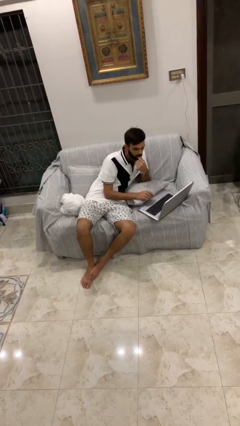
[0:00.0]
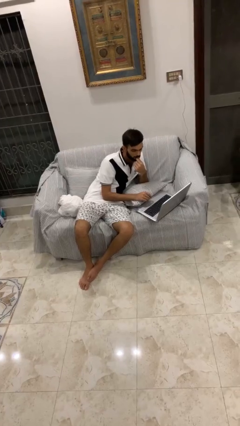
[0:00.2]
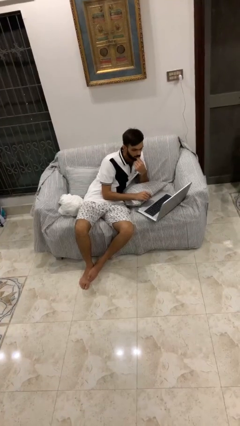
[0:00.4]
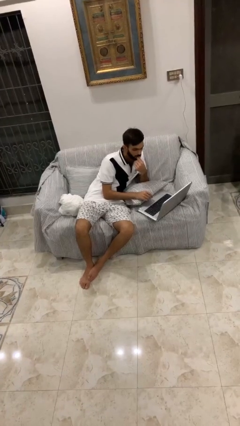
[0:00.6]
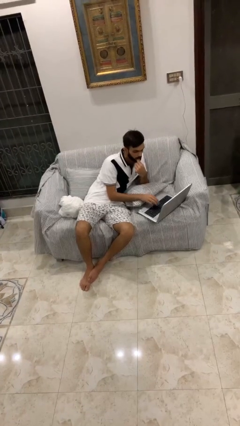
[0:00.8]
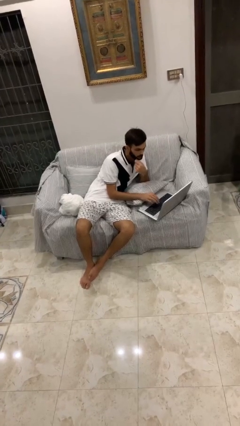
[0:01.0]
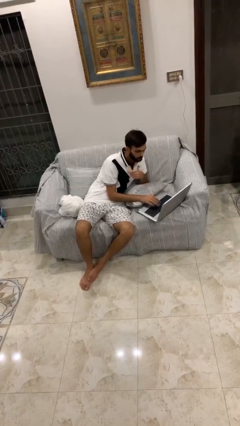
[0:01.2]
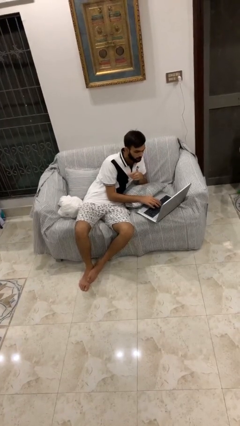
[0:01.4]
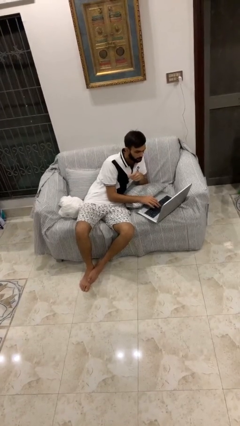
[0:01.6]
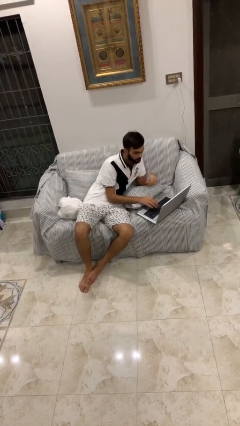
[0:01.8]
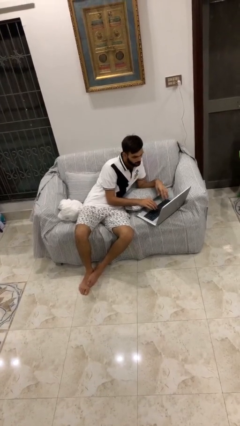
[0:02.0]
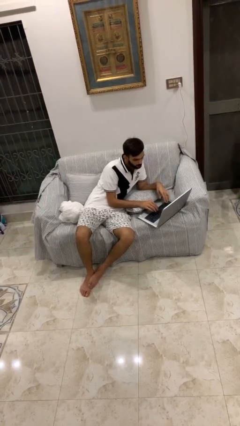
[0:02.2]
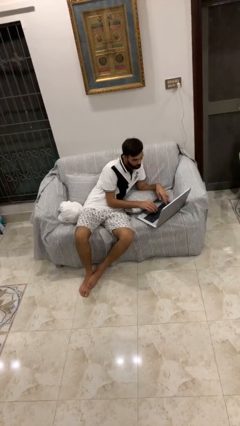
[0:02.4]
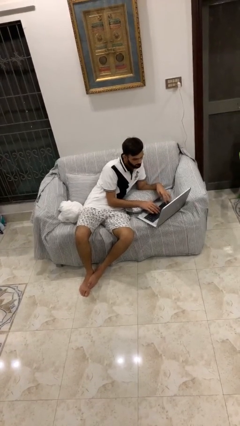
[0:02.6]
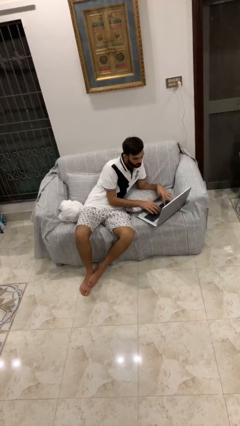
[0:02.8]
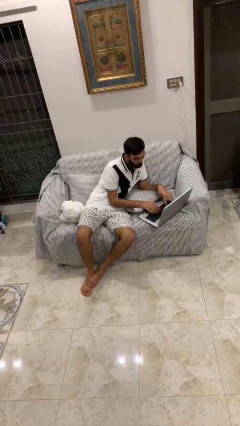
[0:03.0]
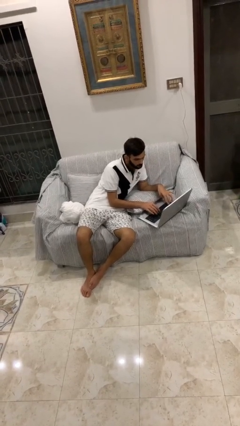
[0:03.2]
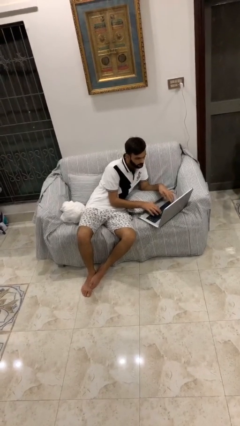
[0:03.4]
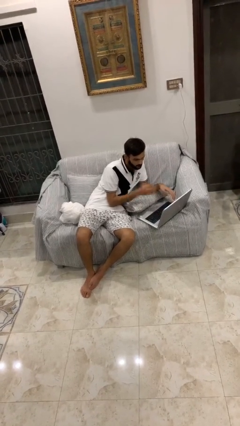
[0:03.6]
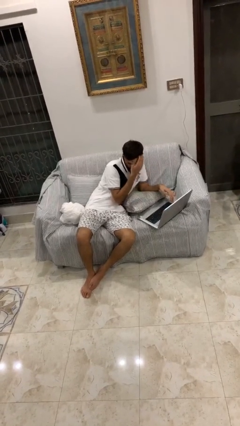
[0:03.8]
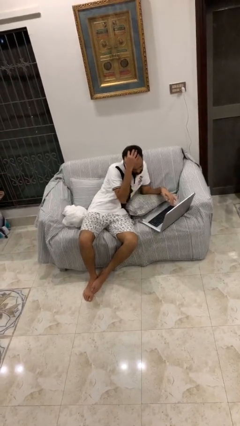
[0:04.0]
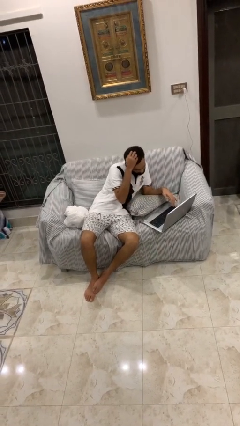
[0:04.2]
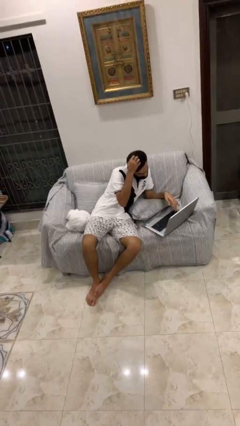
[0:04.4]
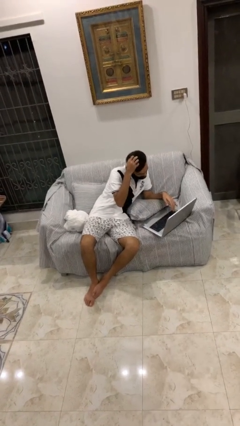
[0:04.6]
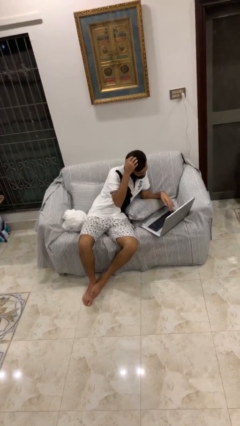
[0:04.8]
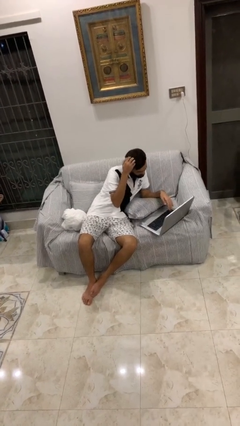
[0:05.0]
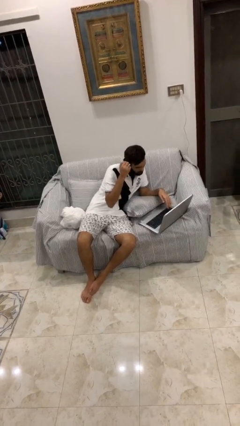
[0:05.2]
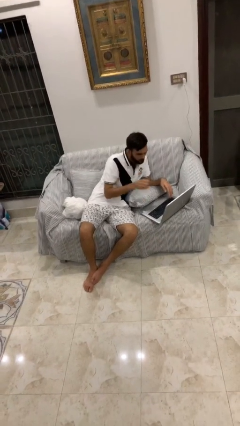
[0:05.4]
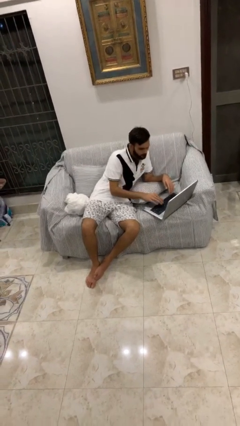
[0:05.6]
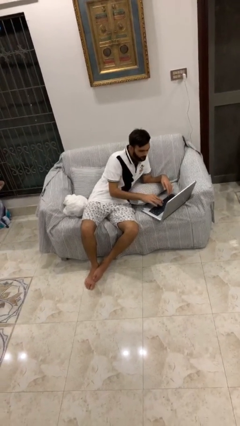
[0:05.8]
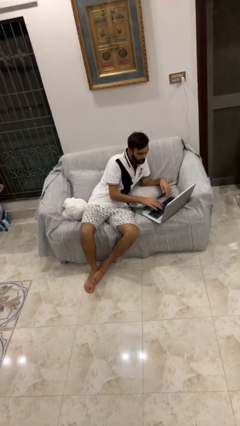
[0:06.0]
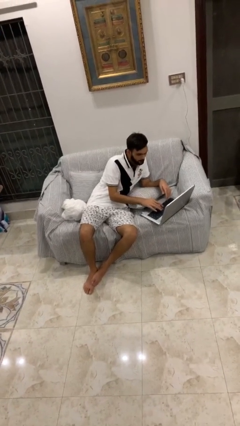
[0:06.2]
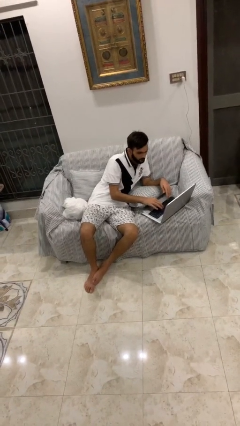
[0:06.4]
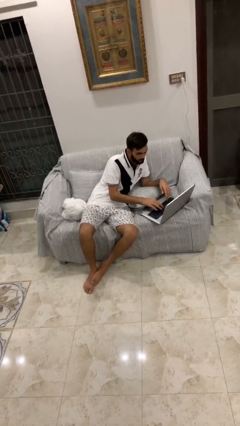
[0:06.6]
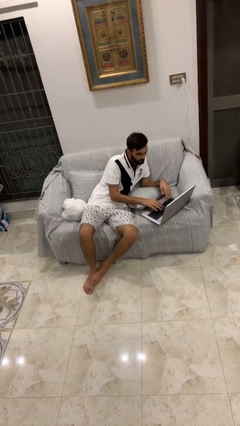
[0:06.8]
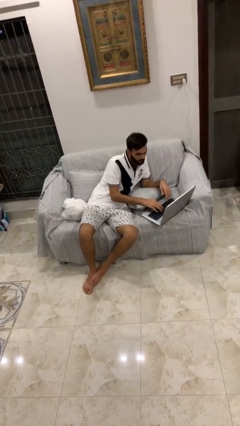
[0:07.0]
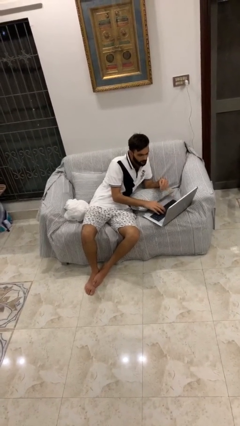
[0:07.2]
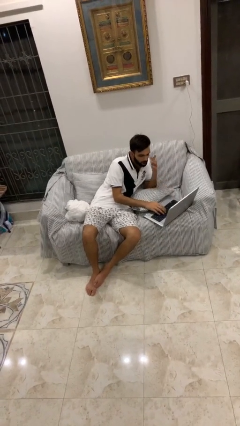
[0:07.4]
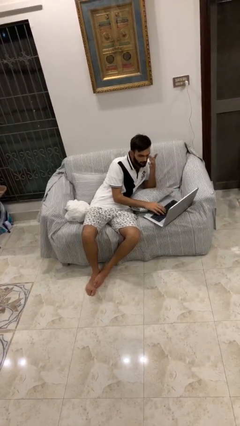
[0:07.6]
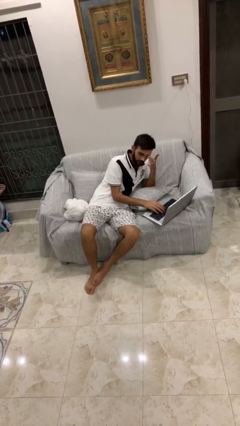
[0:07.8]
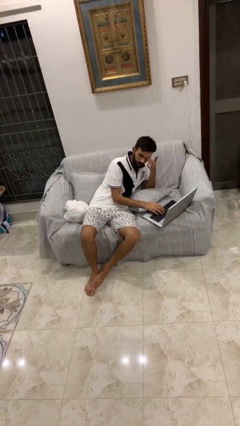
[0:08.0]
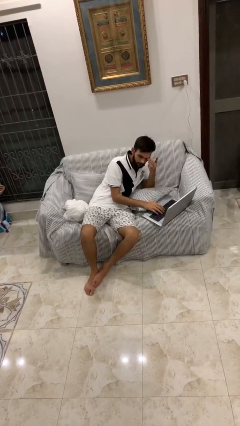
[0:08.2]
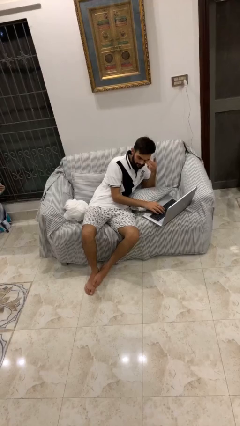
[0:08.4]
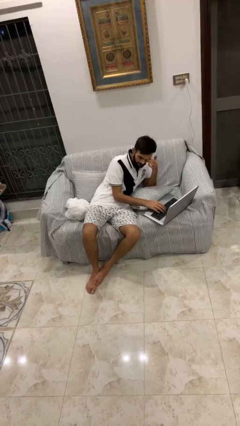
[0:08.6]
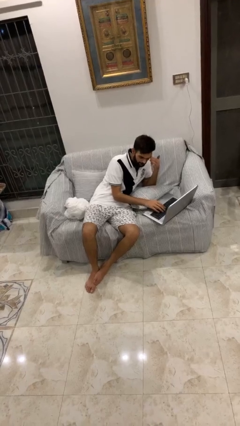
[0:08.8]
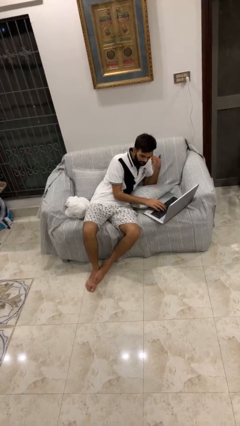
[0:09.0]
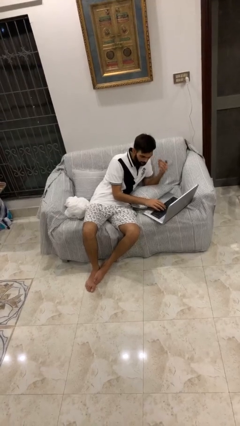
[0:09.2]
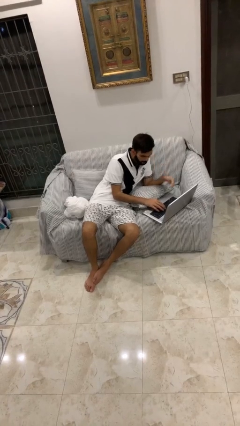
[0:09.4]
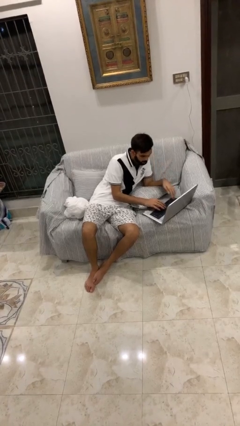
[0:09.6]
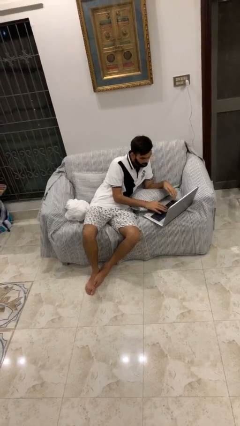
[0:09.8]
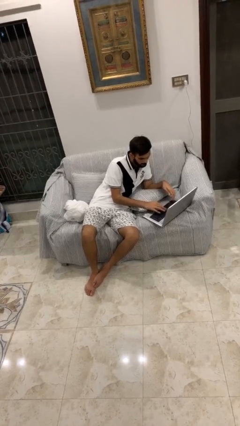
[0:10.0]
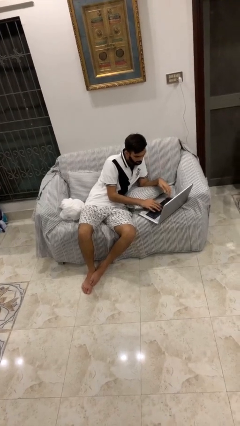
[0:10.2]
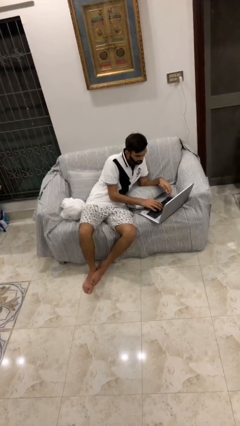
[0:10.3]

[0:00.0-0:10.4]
person interacts with laptop

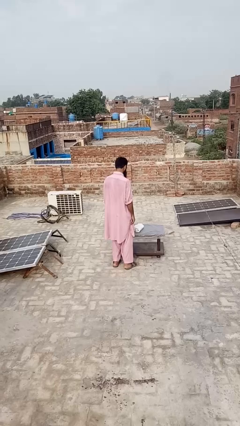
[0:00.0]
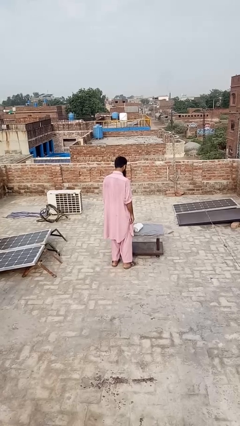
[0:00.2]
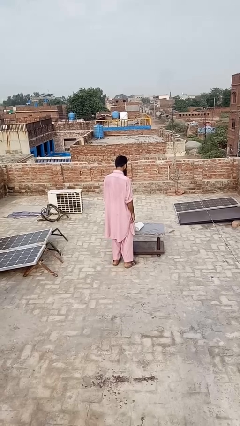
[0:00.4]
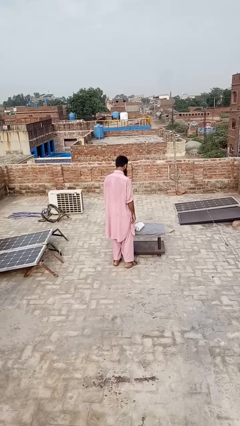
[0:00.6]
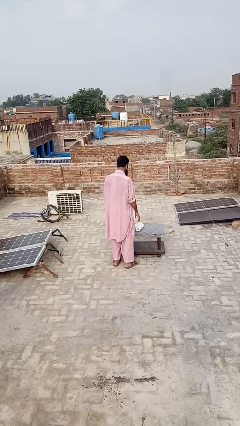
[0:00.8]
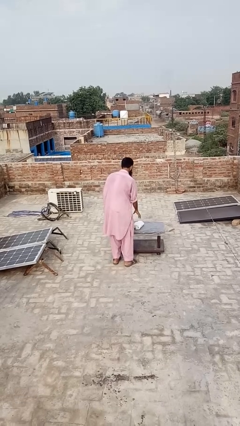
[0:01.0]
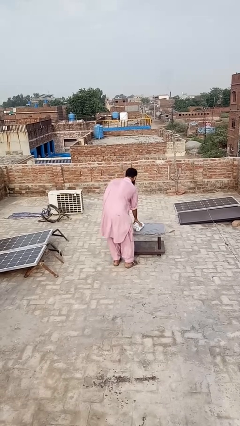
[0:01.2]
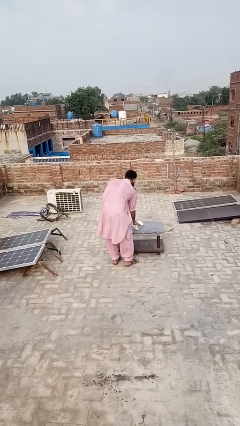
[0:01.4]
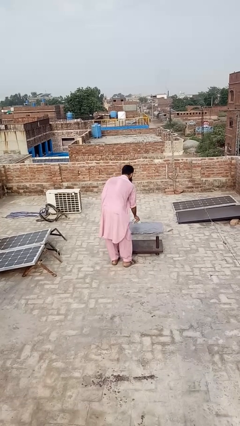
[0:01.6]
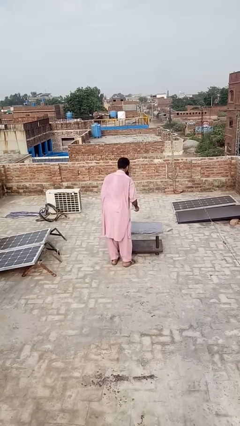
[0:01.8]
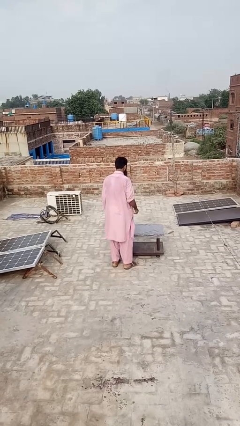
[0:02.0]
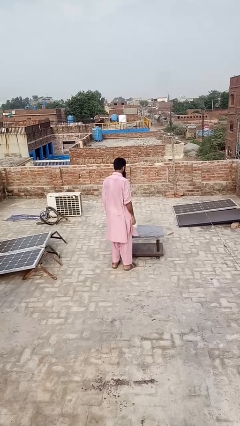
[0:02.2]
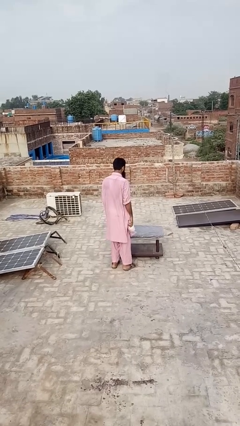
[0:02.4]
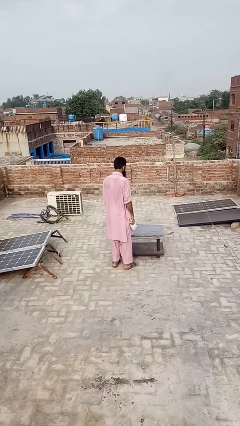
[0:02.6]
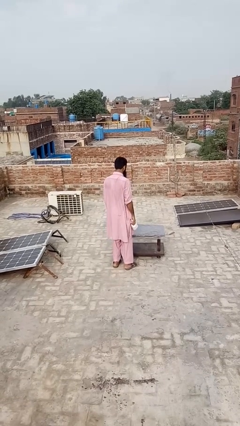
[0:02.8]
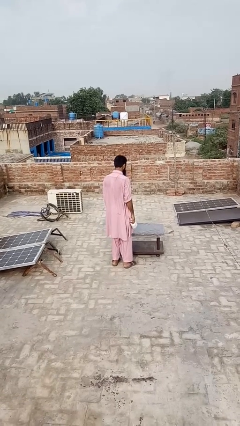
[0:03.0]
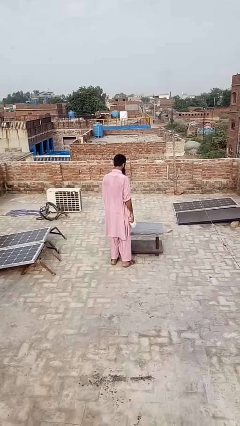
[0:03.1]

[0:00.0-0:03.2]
person picks up object from table

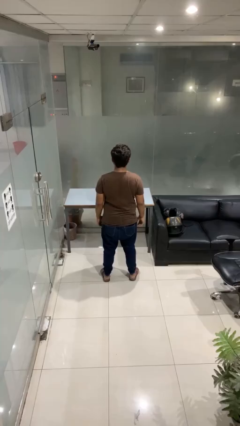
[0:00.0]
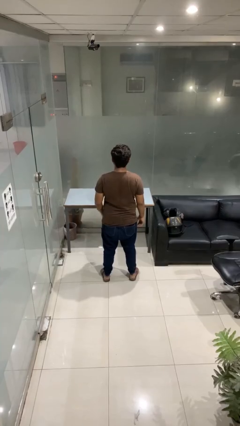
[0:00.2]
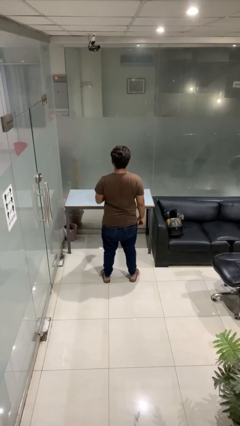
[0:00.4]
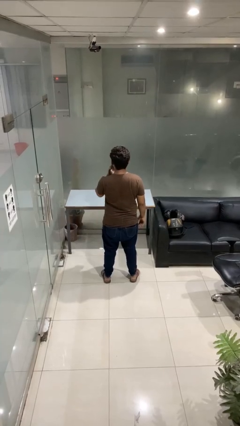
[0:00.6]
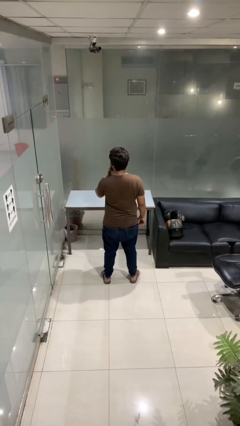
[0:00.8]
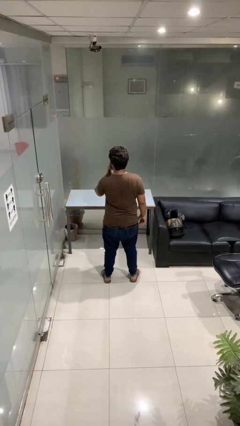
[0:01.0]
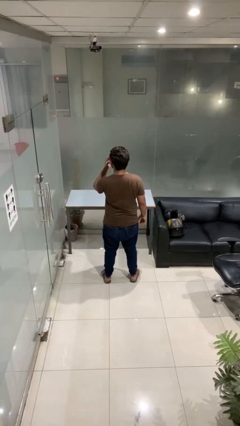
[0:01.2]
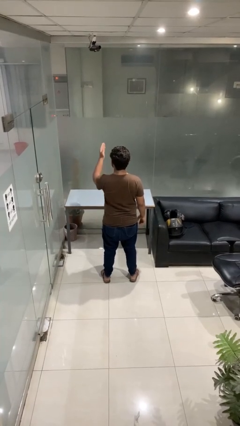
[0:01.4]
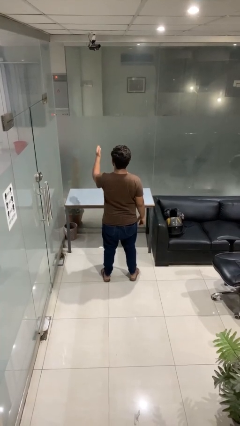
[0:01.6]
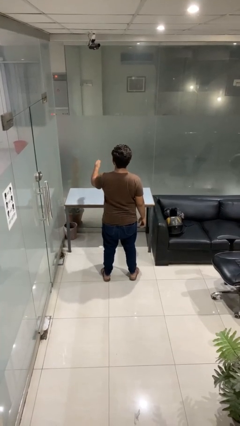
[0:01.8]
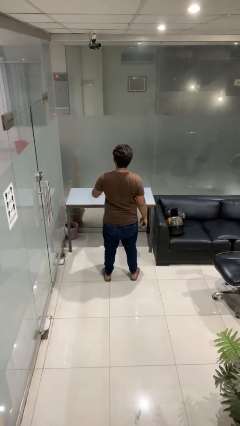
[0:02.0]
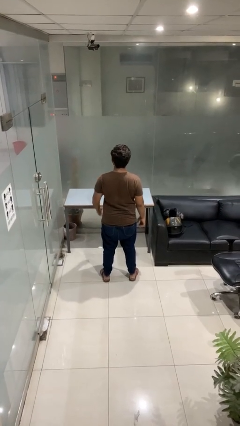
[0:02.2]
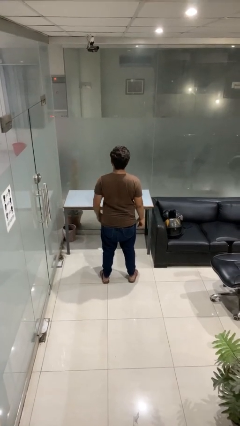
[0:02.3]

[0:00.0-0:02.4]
person gestures blow kiss

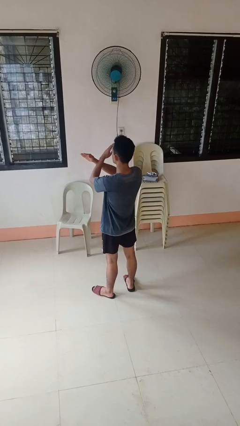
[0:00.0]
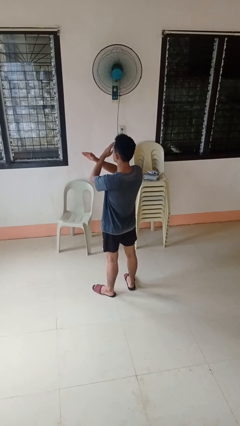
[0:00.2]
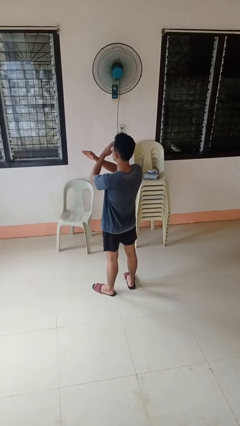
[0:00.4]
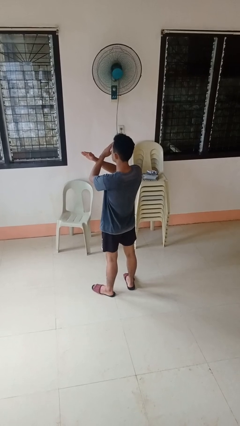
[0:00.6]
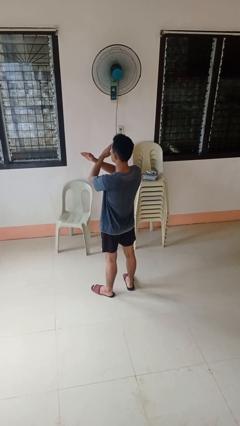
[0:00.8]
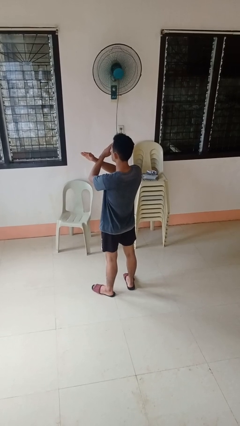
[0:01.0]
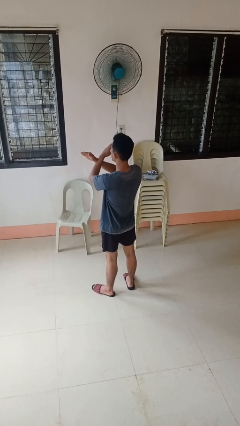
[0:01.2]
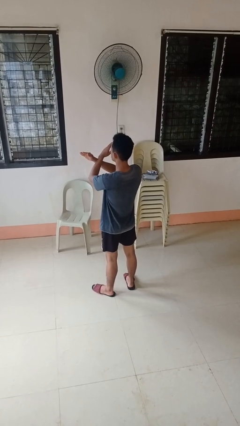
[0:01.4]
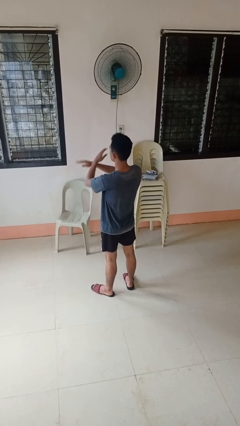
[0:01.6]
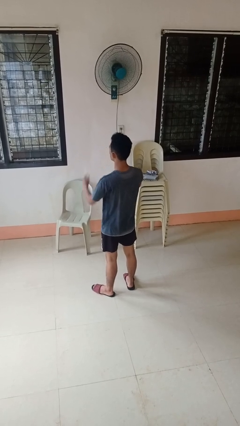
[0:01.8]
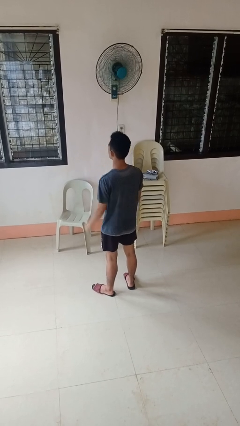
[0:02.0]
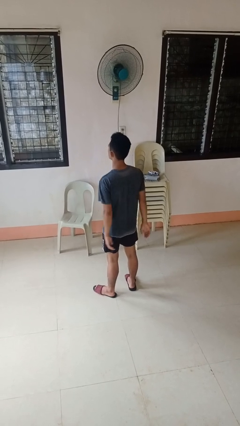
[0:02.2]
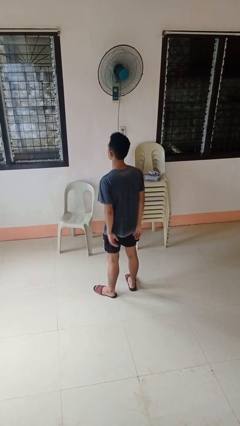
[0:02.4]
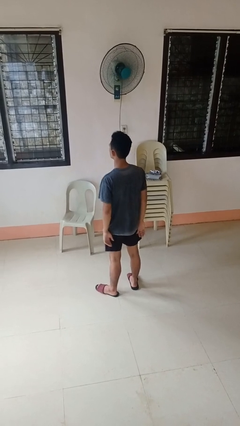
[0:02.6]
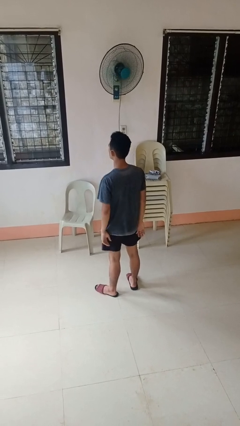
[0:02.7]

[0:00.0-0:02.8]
person gestures arms x
